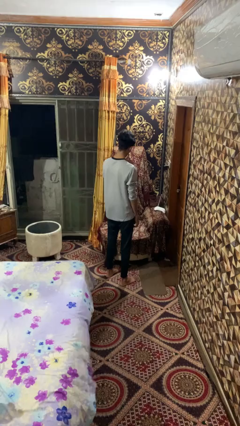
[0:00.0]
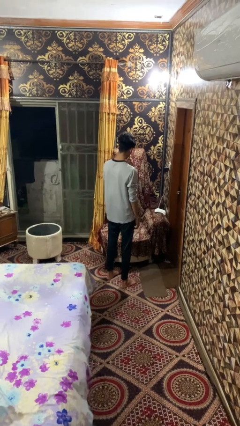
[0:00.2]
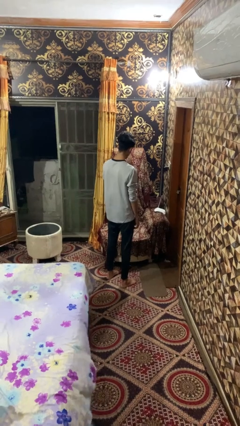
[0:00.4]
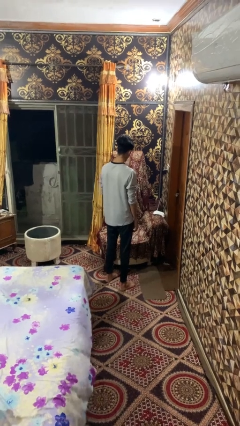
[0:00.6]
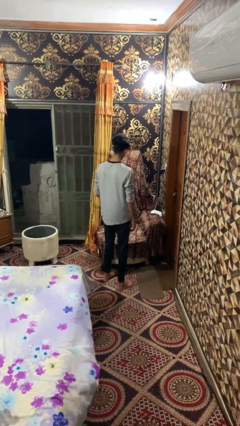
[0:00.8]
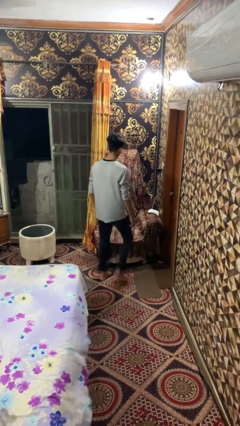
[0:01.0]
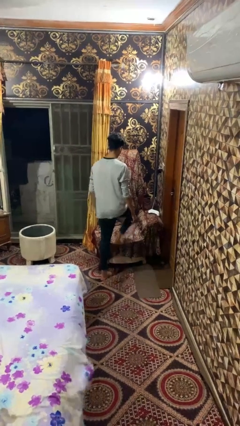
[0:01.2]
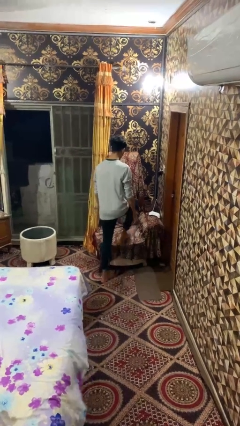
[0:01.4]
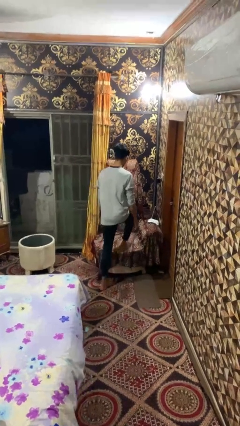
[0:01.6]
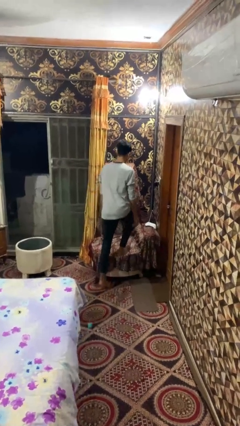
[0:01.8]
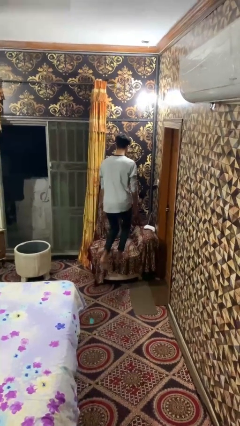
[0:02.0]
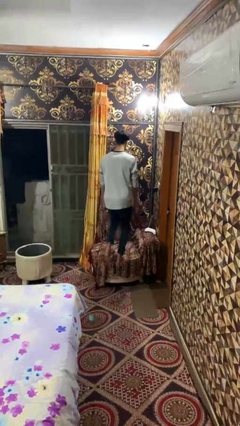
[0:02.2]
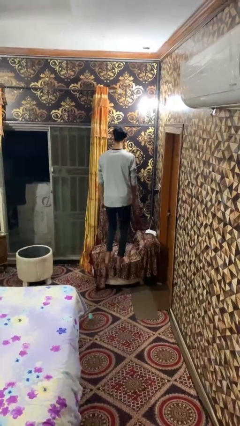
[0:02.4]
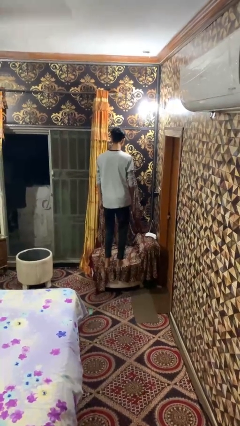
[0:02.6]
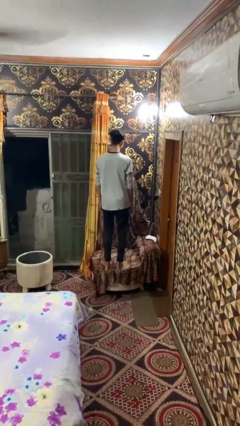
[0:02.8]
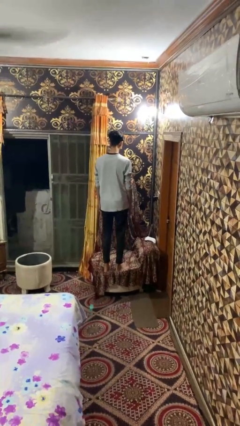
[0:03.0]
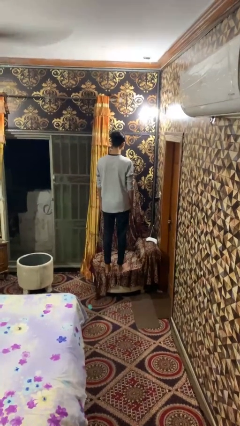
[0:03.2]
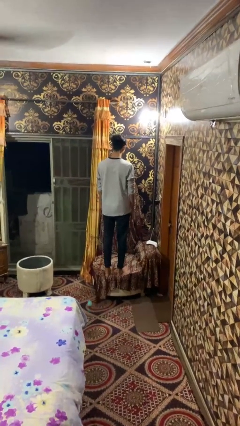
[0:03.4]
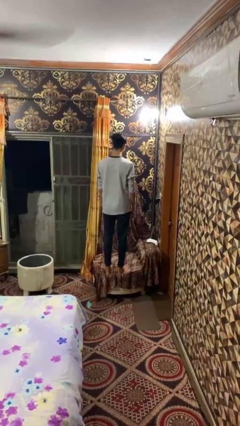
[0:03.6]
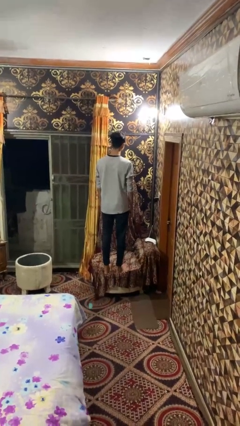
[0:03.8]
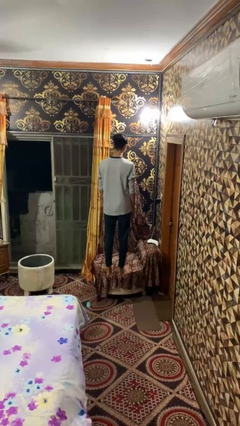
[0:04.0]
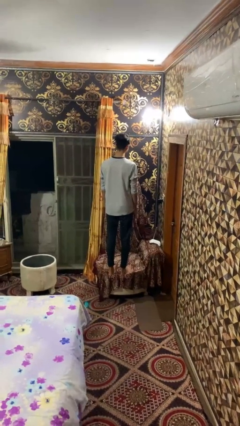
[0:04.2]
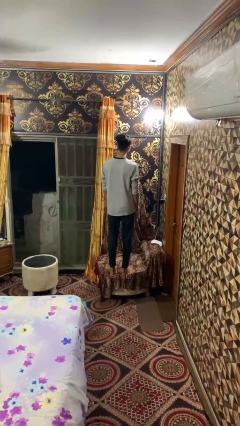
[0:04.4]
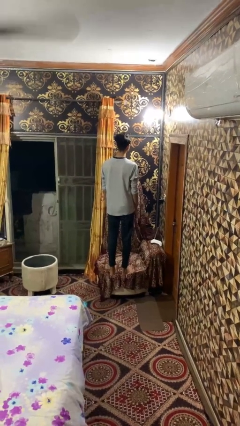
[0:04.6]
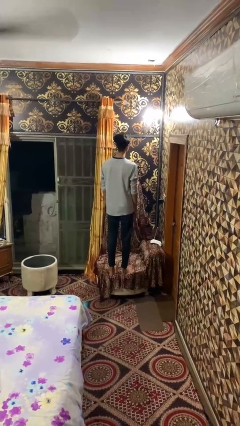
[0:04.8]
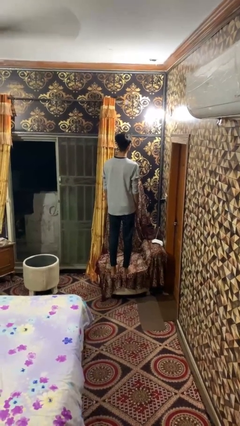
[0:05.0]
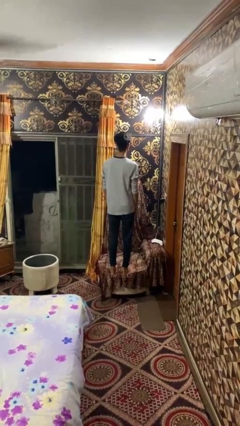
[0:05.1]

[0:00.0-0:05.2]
person climbs on couch

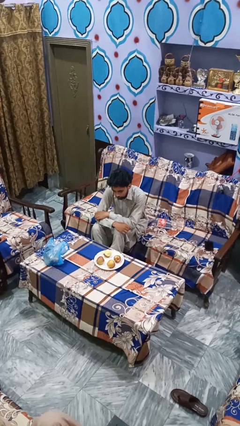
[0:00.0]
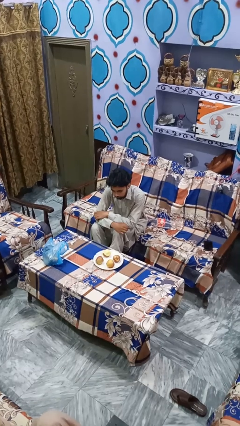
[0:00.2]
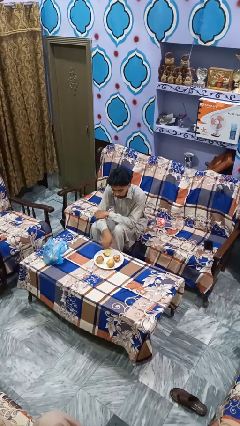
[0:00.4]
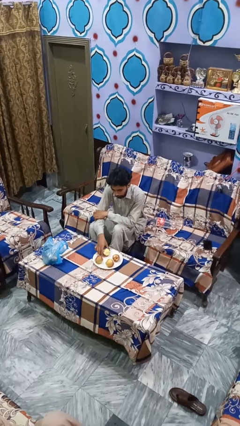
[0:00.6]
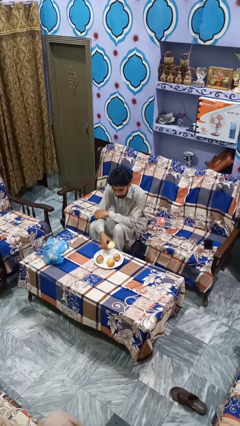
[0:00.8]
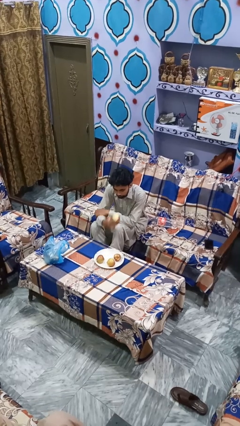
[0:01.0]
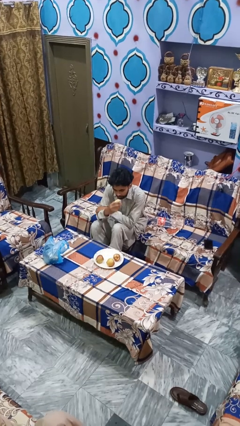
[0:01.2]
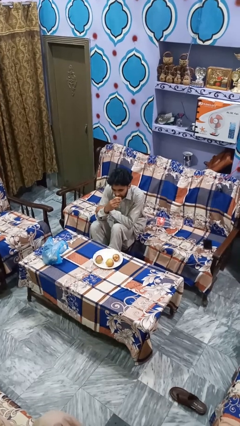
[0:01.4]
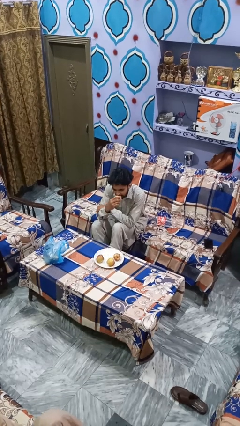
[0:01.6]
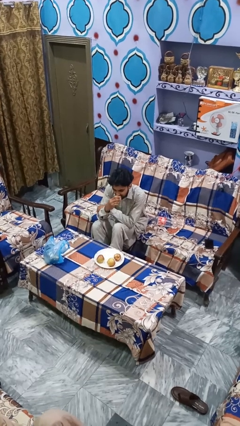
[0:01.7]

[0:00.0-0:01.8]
person eats apple

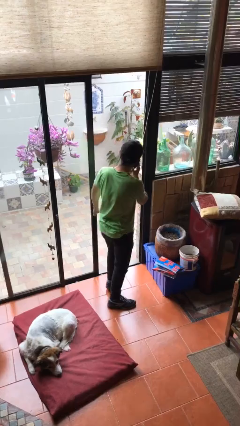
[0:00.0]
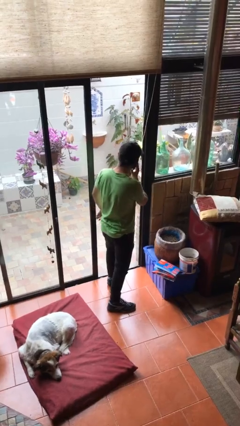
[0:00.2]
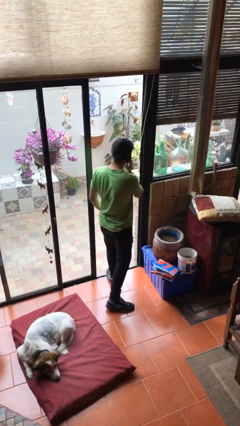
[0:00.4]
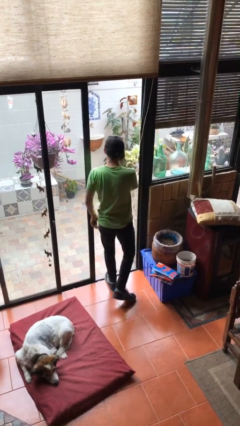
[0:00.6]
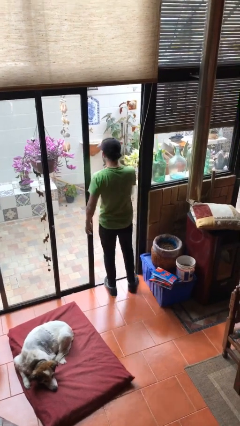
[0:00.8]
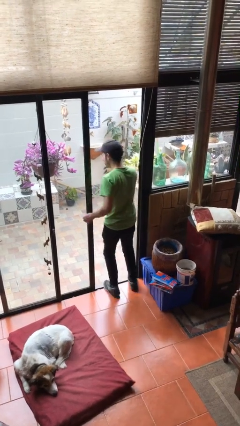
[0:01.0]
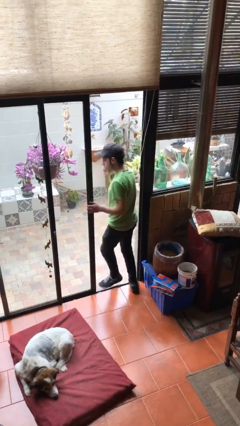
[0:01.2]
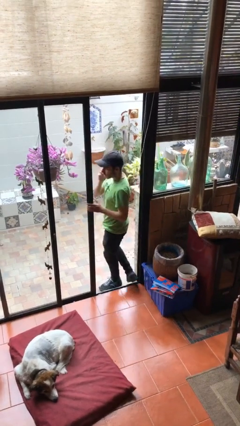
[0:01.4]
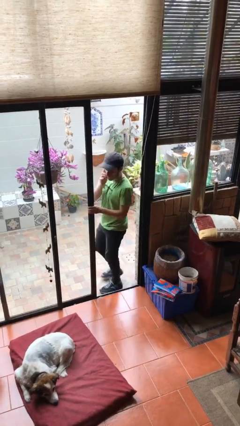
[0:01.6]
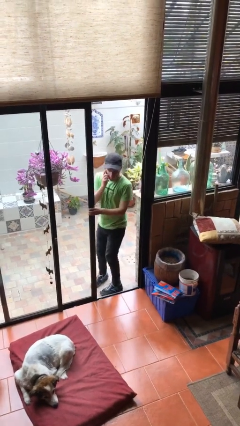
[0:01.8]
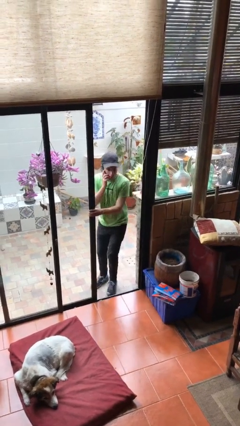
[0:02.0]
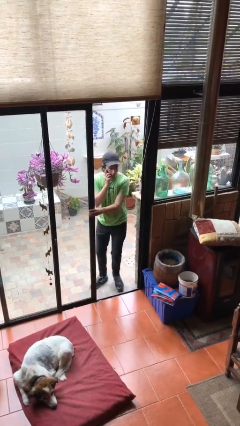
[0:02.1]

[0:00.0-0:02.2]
person exits scene through structure

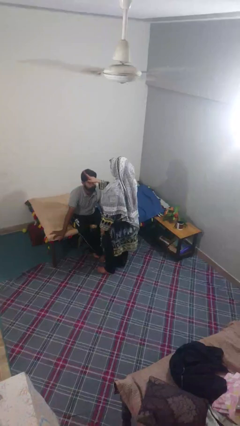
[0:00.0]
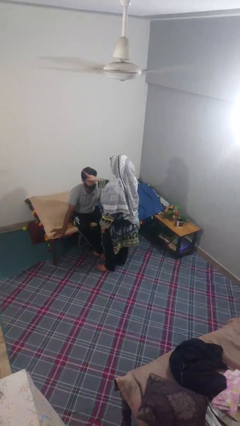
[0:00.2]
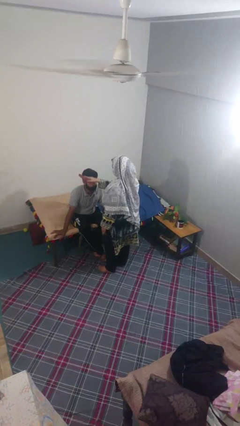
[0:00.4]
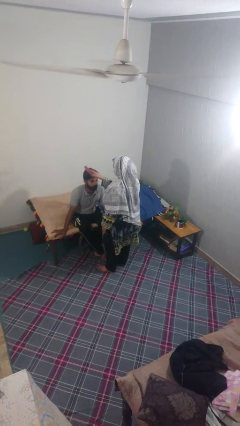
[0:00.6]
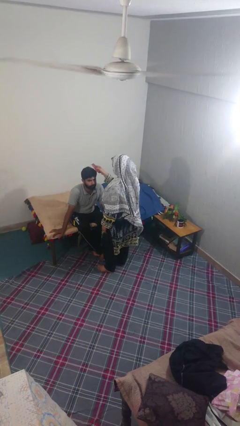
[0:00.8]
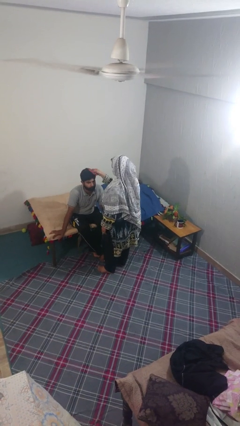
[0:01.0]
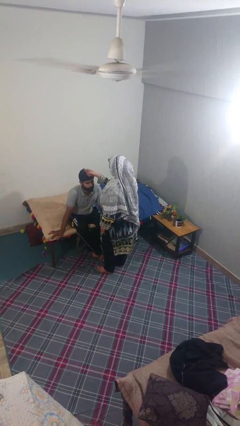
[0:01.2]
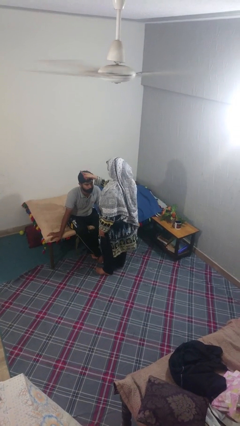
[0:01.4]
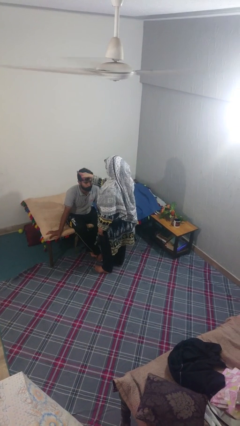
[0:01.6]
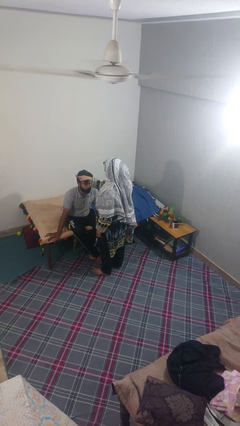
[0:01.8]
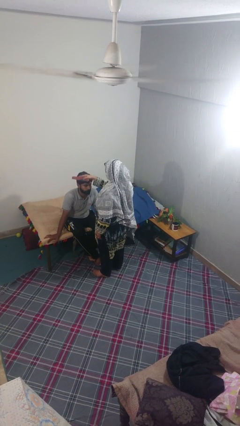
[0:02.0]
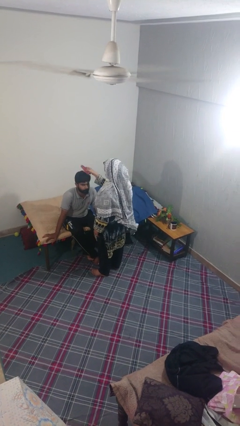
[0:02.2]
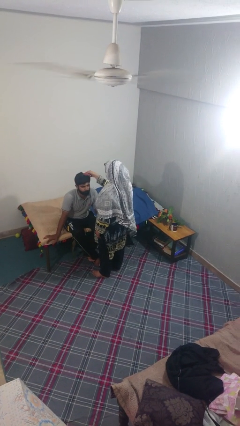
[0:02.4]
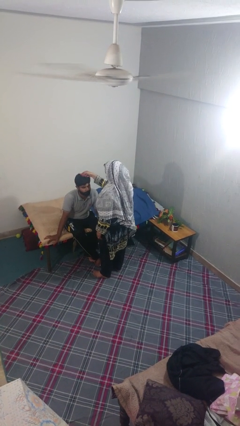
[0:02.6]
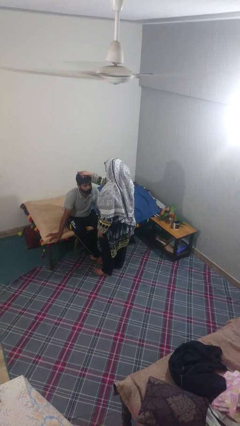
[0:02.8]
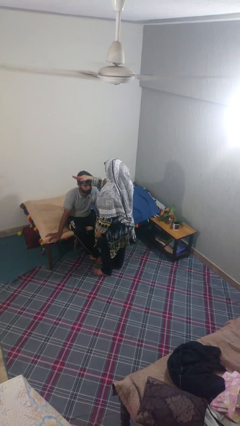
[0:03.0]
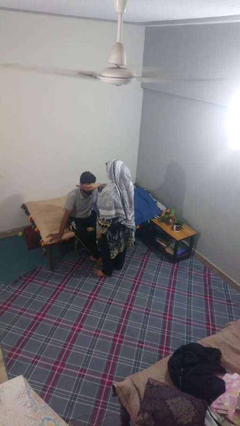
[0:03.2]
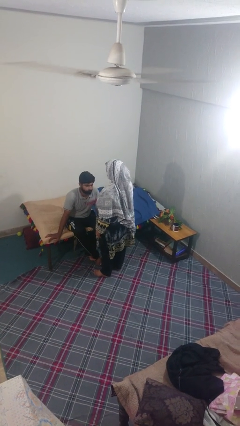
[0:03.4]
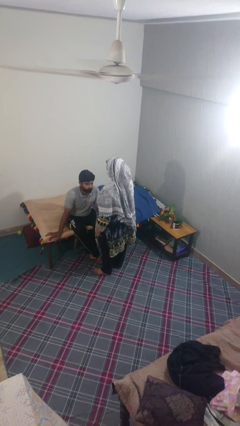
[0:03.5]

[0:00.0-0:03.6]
person brushes hair of person

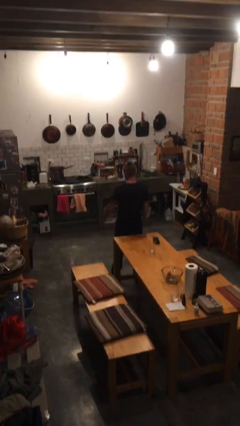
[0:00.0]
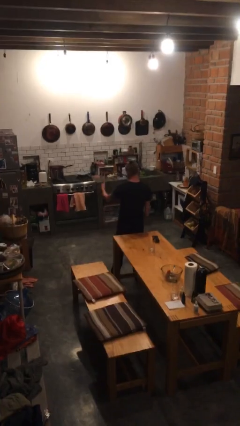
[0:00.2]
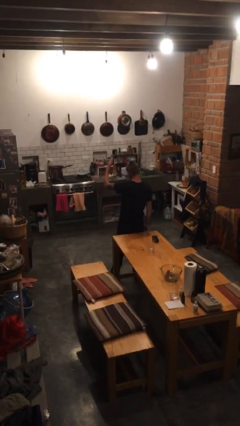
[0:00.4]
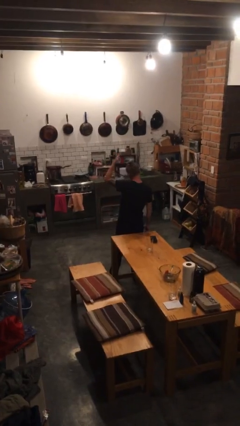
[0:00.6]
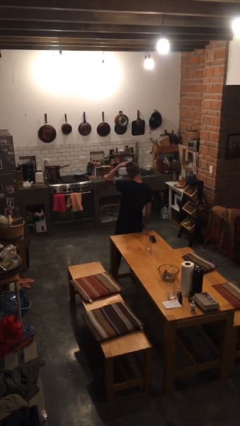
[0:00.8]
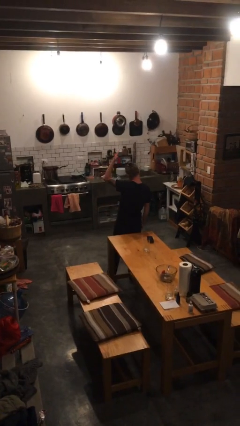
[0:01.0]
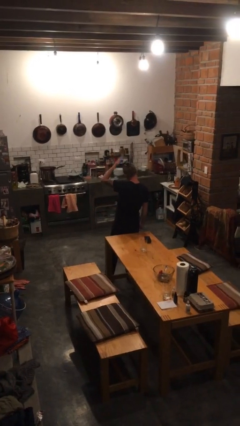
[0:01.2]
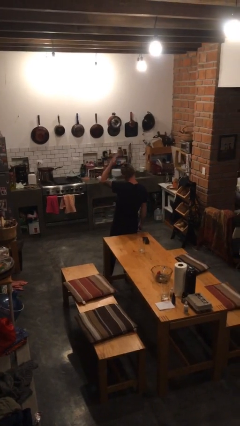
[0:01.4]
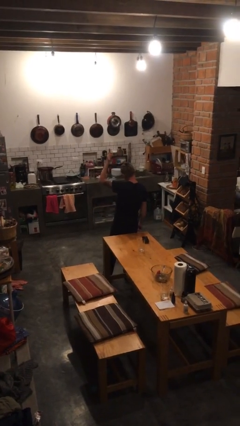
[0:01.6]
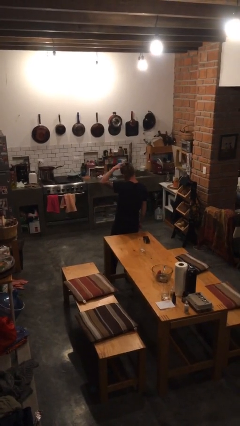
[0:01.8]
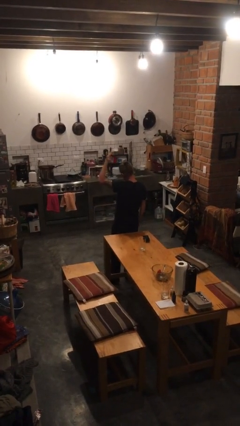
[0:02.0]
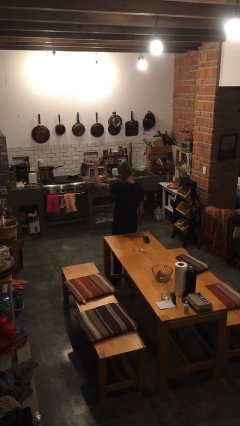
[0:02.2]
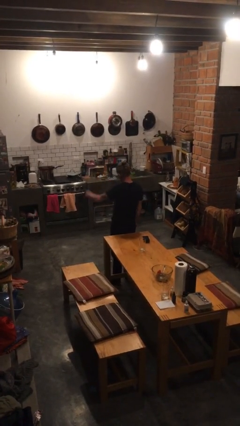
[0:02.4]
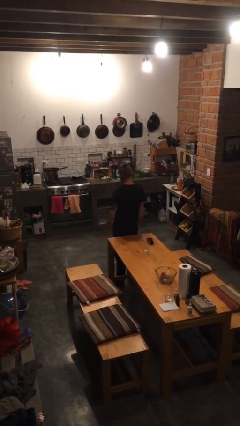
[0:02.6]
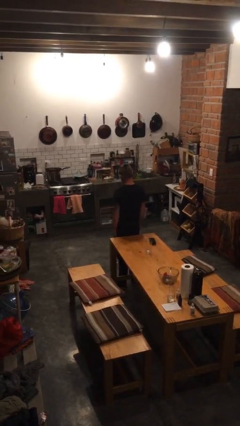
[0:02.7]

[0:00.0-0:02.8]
person pats head

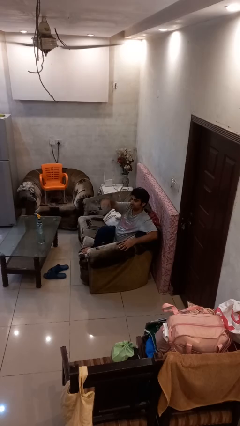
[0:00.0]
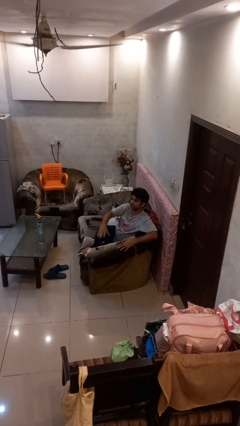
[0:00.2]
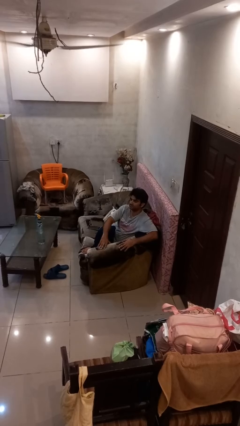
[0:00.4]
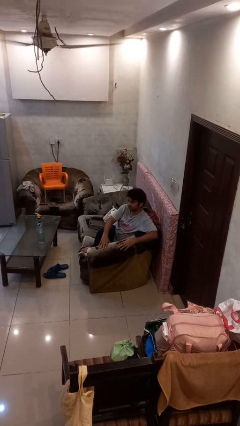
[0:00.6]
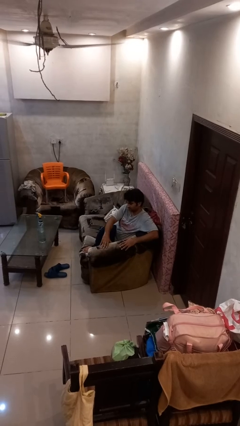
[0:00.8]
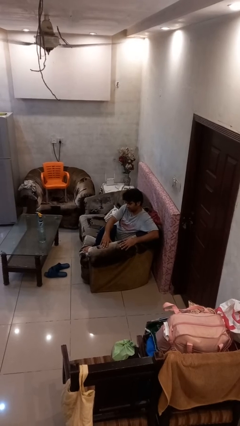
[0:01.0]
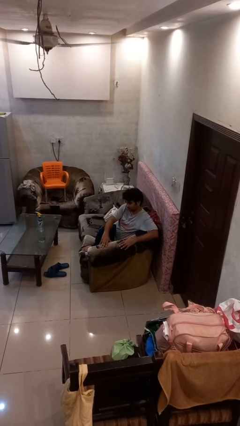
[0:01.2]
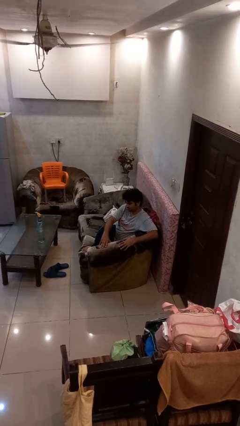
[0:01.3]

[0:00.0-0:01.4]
person gestures lower hand

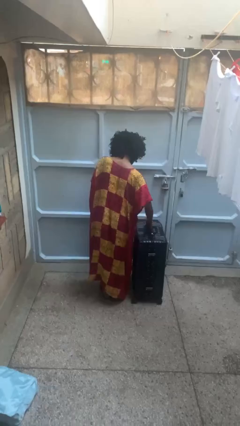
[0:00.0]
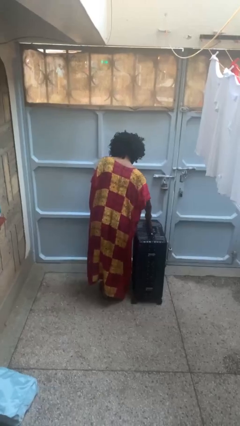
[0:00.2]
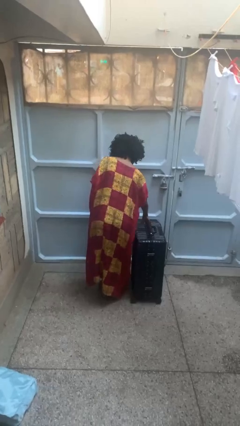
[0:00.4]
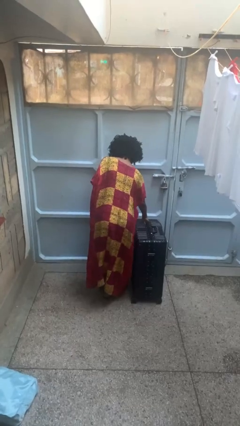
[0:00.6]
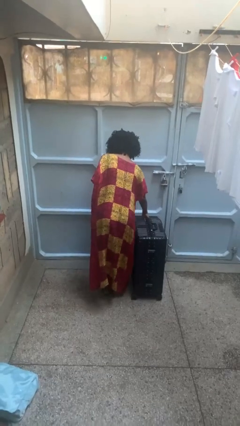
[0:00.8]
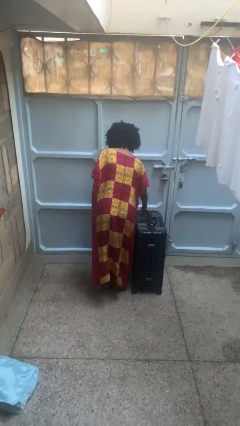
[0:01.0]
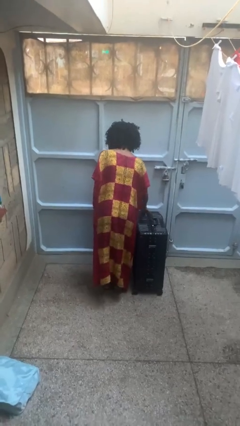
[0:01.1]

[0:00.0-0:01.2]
person closes suitcase
